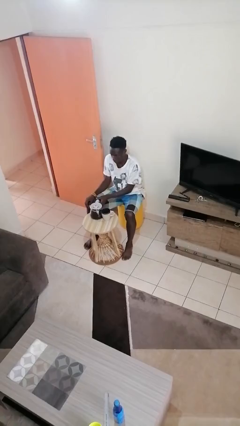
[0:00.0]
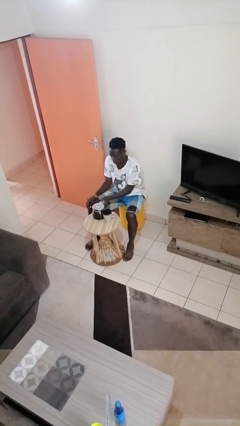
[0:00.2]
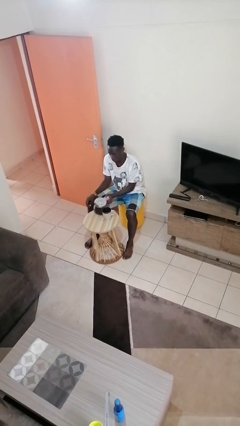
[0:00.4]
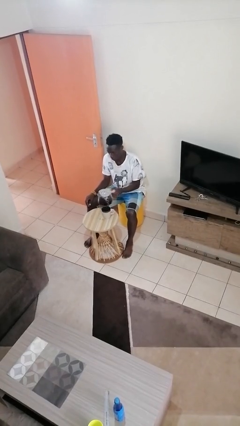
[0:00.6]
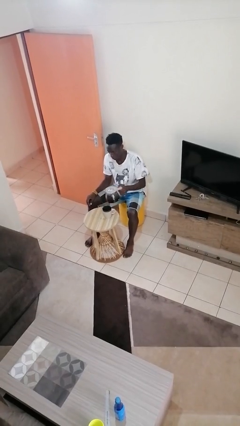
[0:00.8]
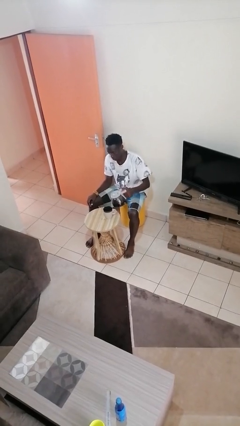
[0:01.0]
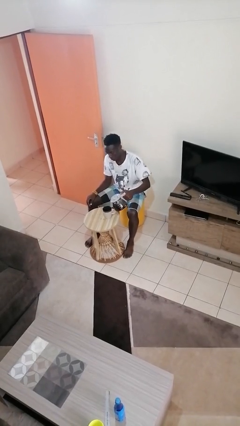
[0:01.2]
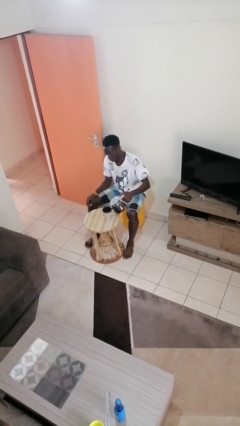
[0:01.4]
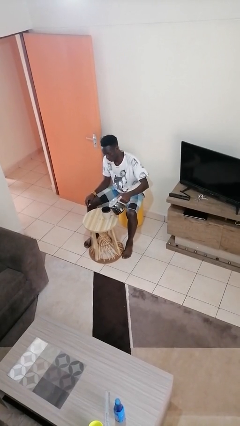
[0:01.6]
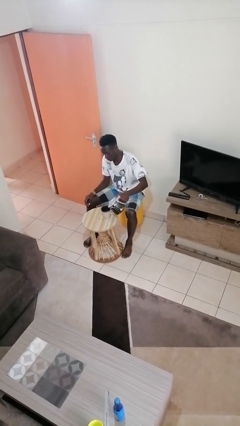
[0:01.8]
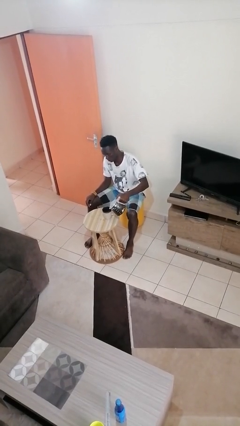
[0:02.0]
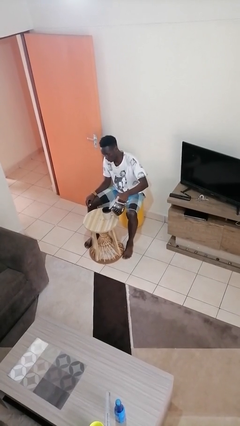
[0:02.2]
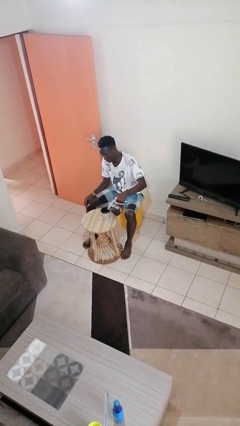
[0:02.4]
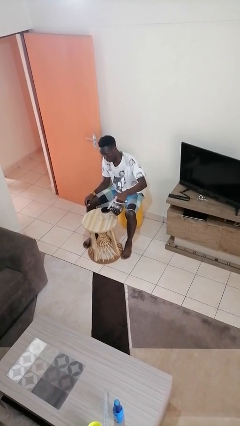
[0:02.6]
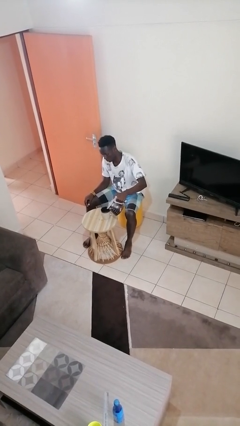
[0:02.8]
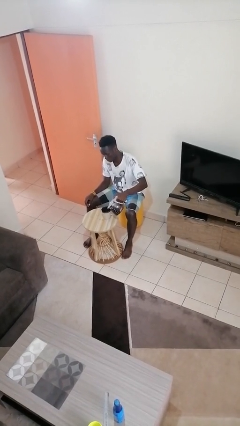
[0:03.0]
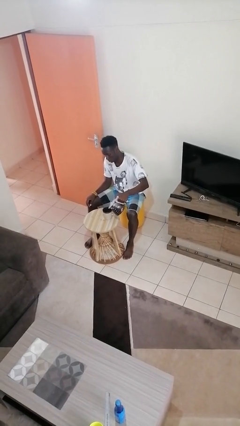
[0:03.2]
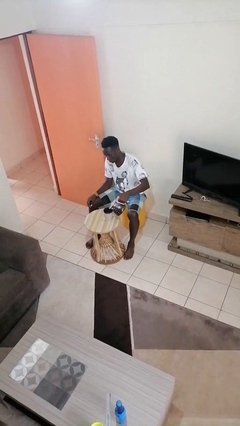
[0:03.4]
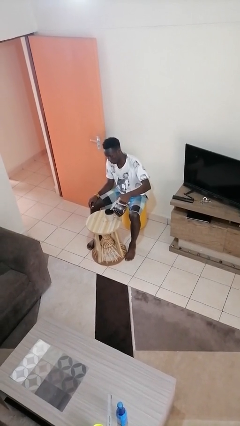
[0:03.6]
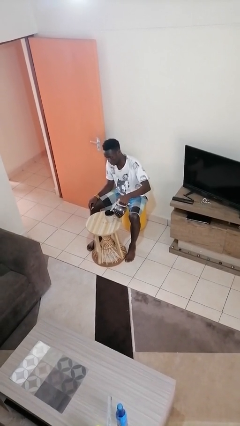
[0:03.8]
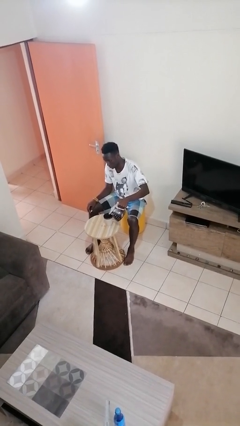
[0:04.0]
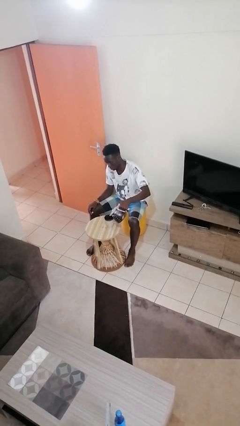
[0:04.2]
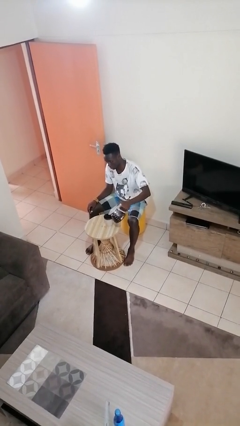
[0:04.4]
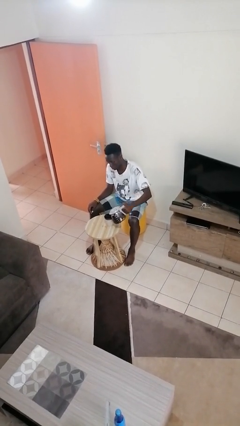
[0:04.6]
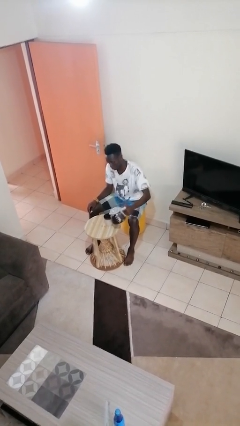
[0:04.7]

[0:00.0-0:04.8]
person pours coffee into mug

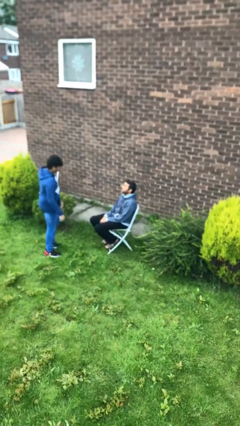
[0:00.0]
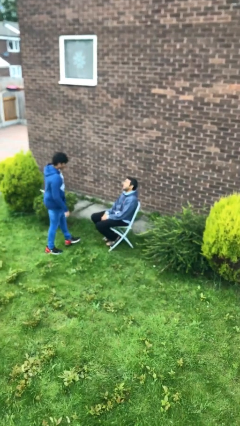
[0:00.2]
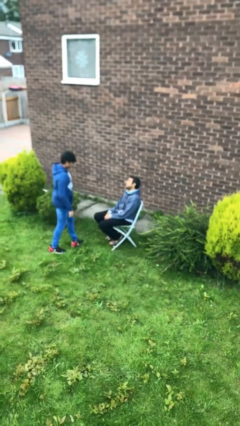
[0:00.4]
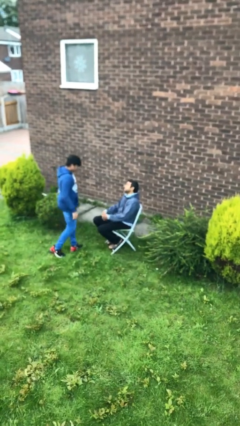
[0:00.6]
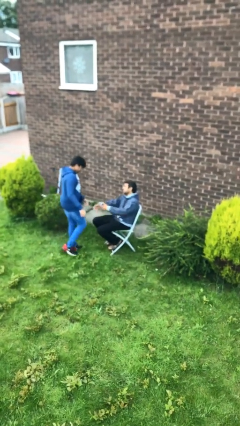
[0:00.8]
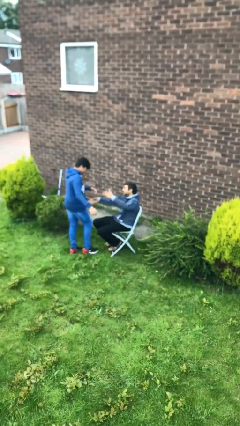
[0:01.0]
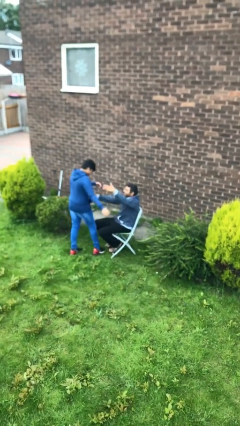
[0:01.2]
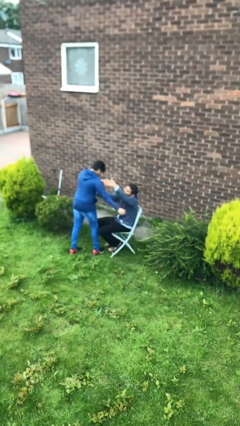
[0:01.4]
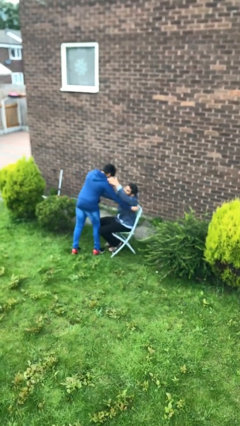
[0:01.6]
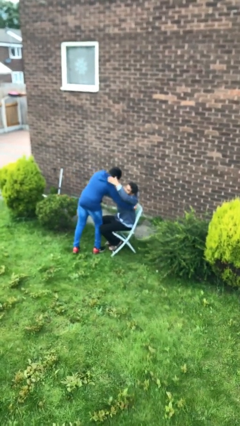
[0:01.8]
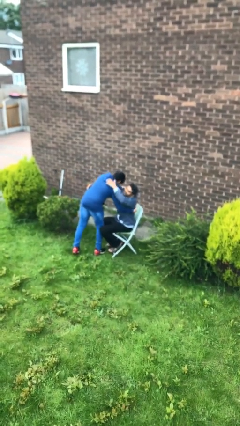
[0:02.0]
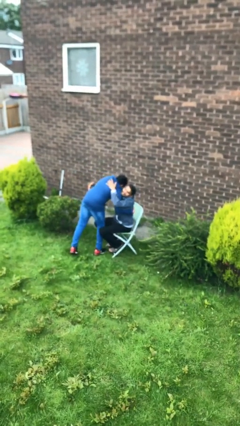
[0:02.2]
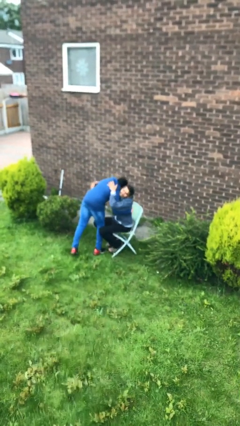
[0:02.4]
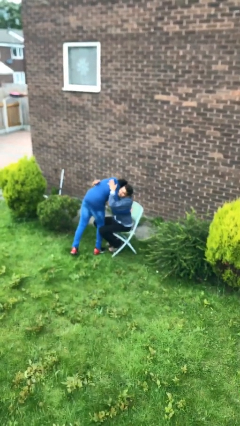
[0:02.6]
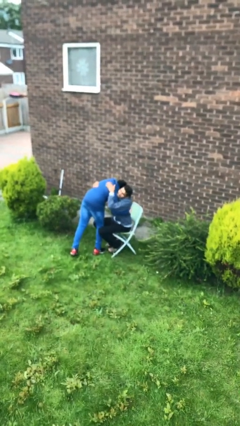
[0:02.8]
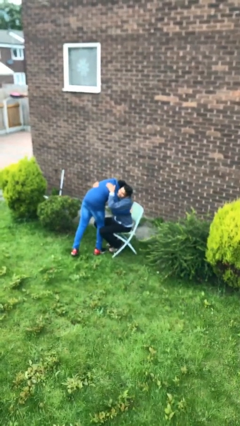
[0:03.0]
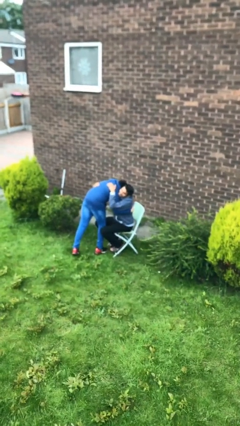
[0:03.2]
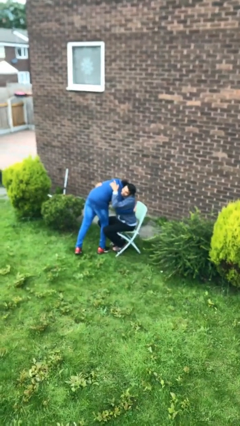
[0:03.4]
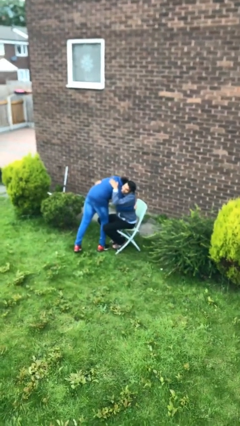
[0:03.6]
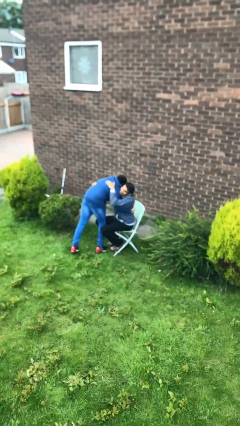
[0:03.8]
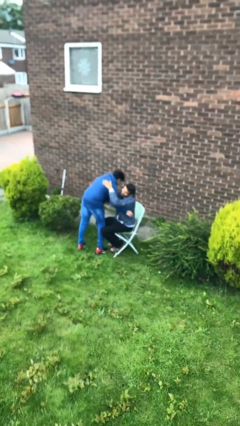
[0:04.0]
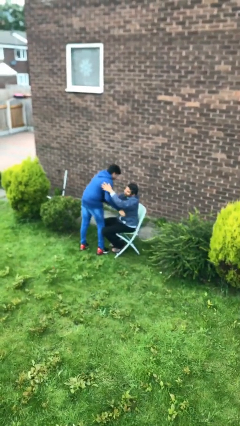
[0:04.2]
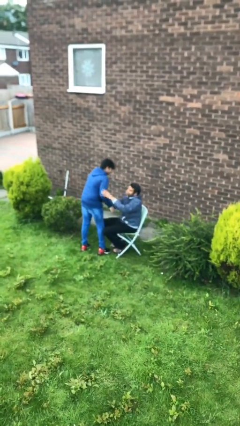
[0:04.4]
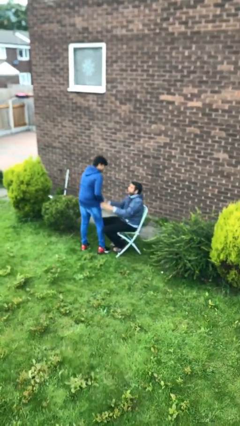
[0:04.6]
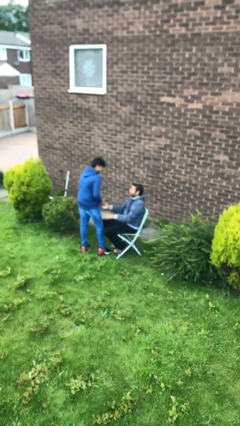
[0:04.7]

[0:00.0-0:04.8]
person embraces person

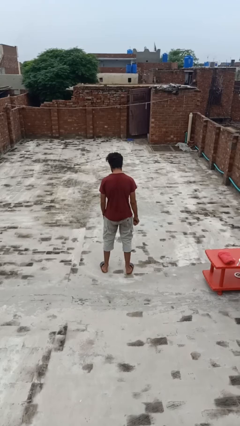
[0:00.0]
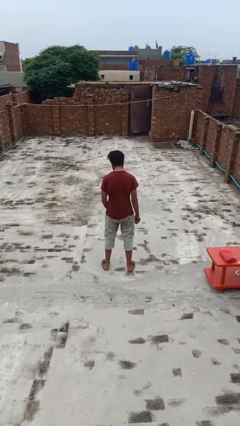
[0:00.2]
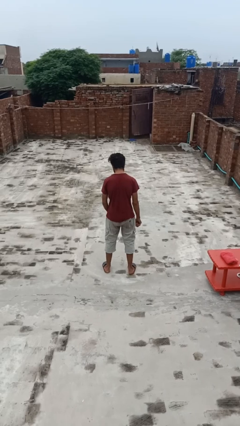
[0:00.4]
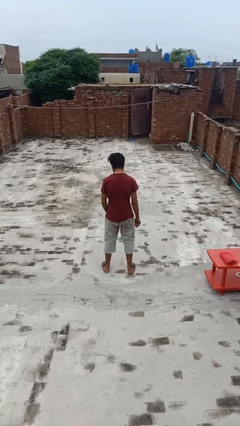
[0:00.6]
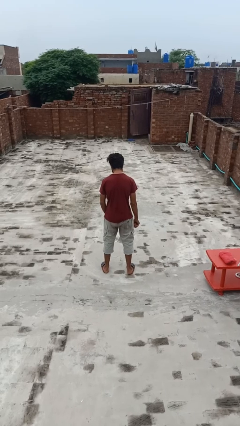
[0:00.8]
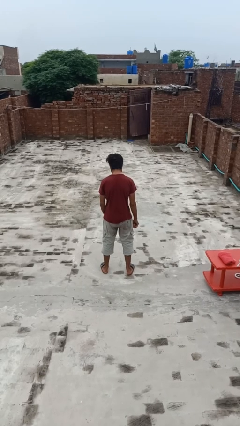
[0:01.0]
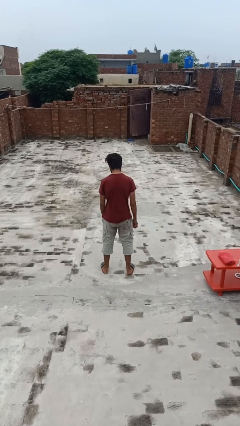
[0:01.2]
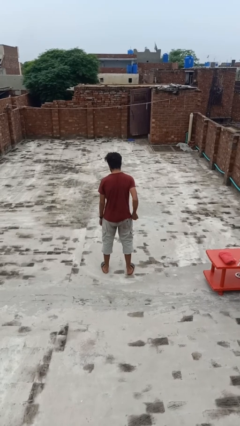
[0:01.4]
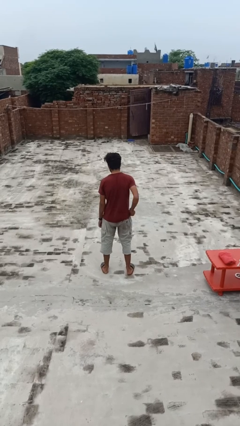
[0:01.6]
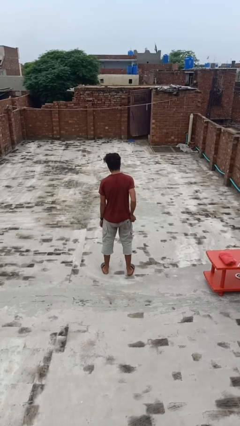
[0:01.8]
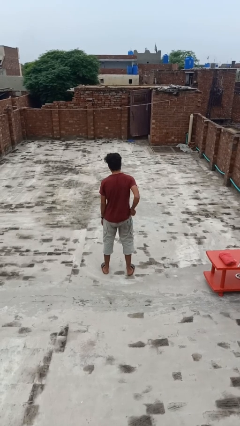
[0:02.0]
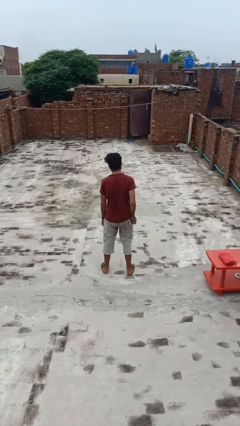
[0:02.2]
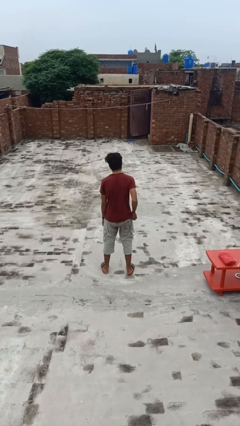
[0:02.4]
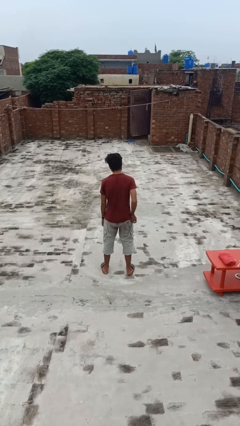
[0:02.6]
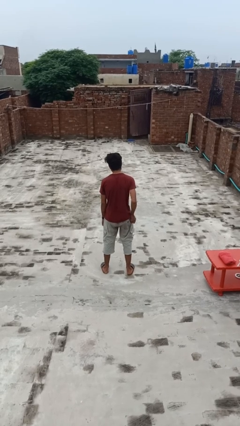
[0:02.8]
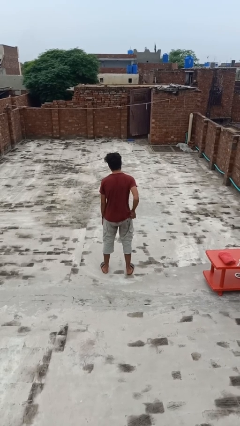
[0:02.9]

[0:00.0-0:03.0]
person rubs foot

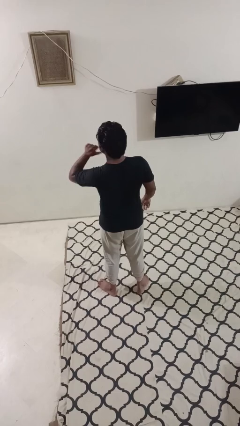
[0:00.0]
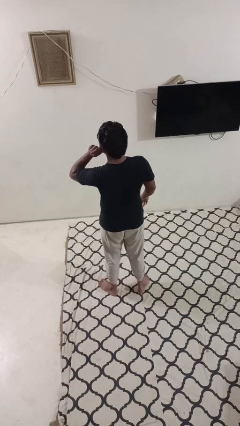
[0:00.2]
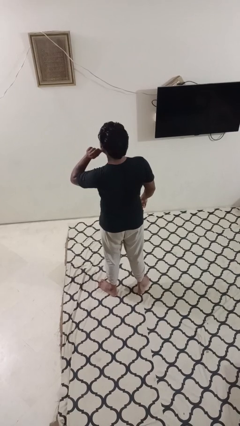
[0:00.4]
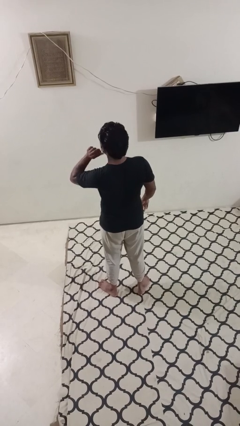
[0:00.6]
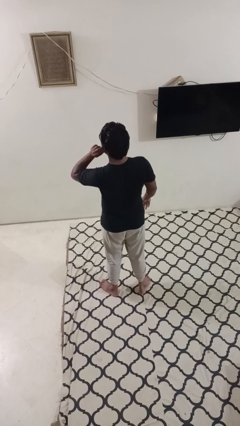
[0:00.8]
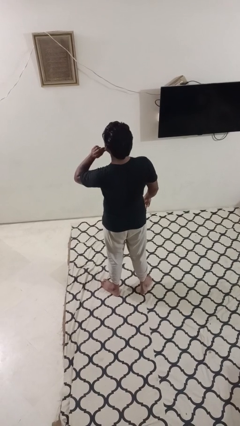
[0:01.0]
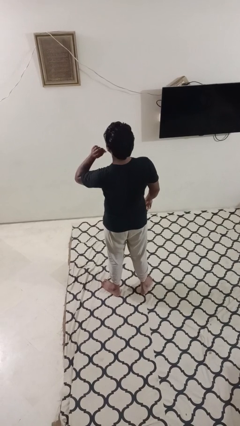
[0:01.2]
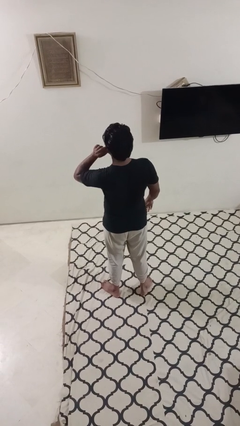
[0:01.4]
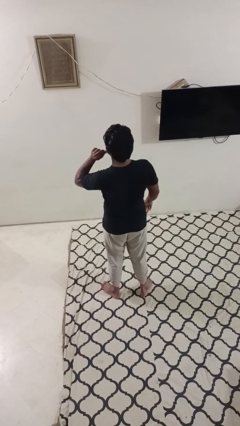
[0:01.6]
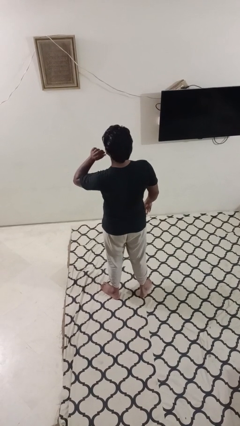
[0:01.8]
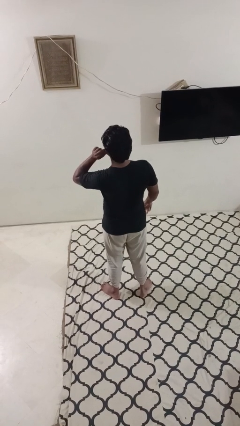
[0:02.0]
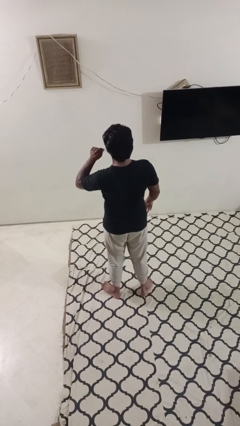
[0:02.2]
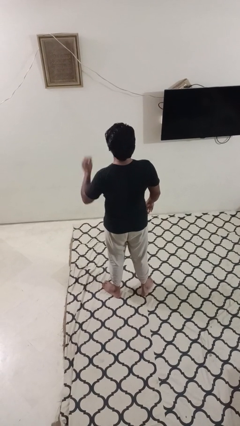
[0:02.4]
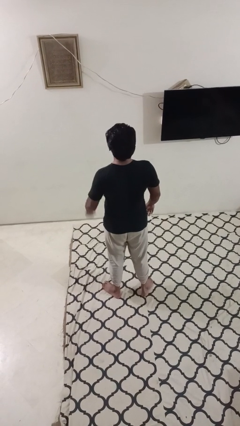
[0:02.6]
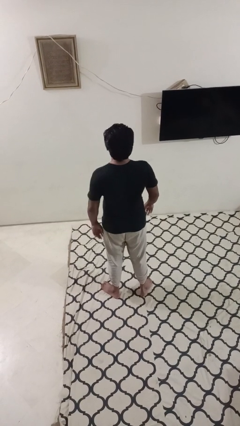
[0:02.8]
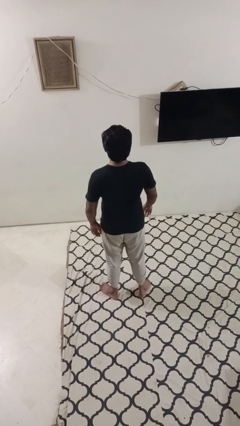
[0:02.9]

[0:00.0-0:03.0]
person touches earlobe

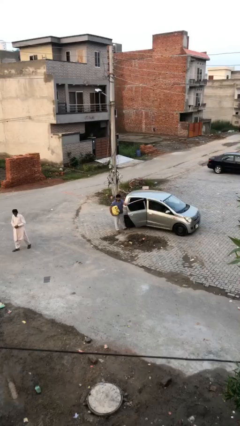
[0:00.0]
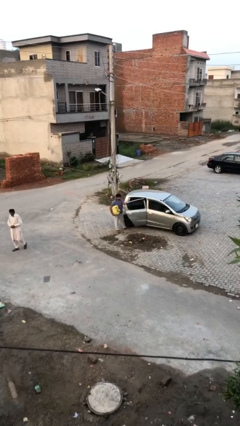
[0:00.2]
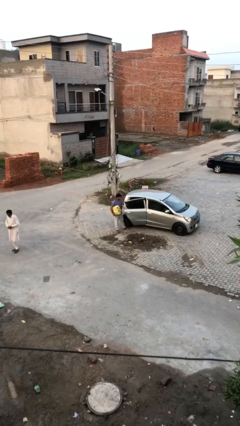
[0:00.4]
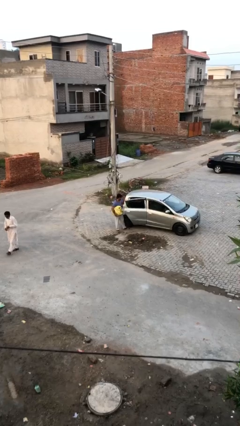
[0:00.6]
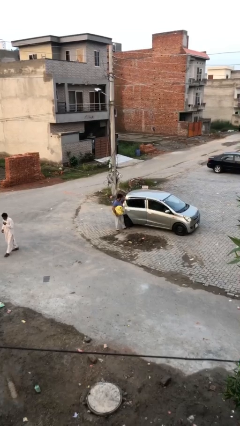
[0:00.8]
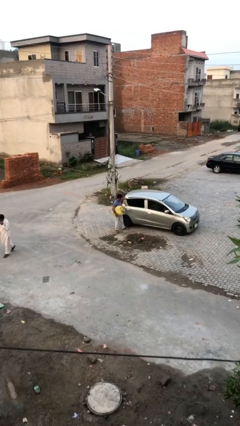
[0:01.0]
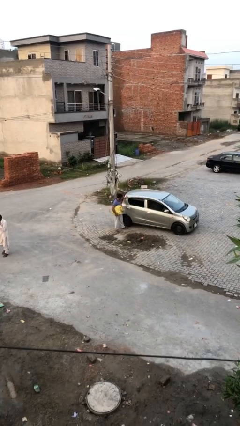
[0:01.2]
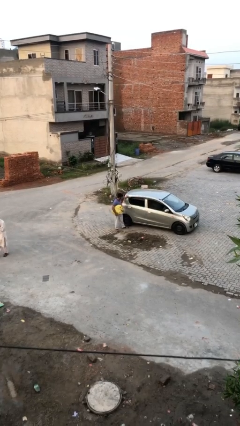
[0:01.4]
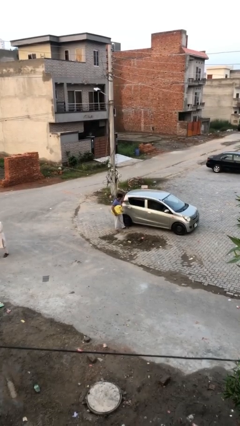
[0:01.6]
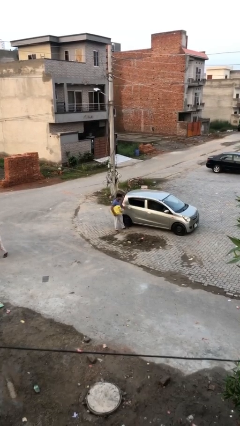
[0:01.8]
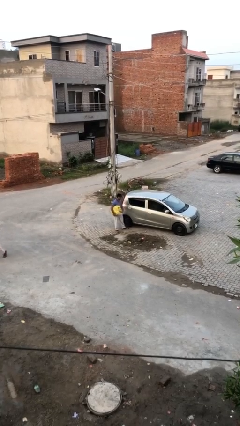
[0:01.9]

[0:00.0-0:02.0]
person closes car door

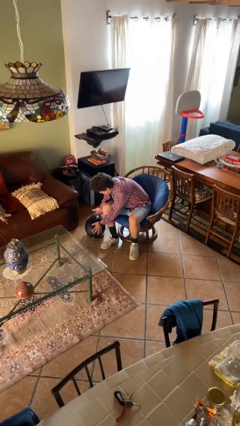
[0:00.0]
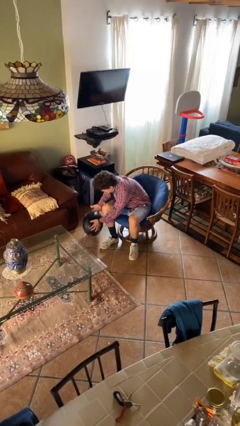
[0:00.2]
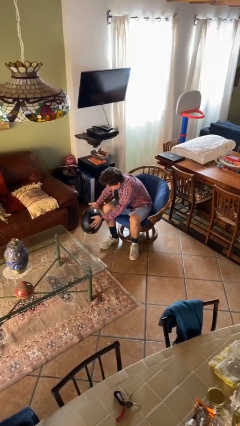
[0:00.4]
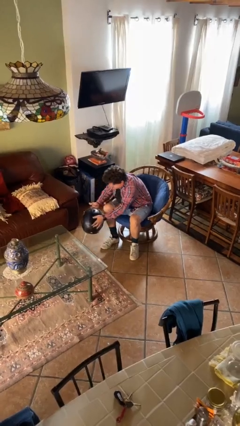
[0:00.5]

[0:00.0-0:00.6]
person picks up object from floor
